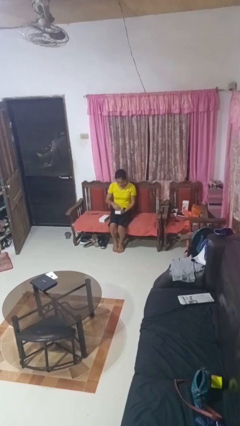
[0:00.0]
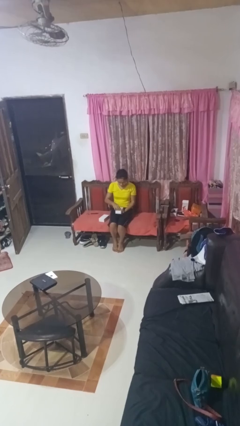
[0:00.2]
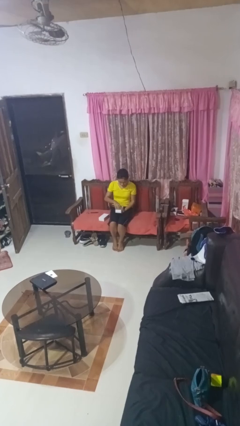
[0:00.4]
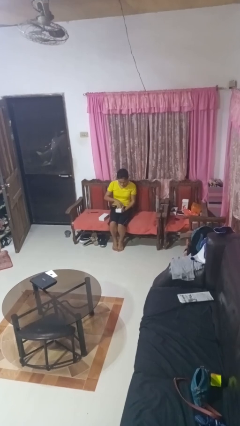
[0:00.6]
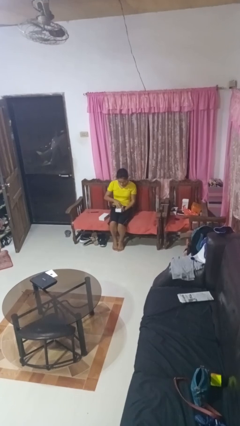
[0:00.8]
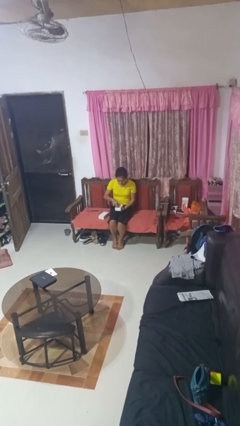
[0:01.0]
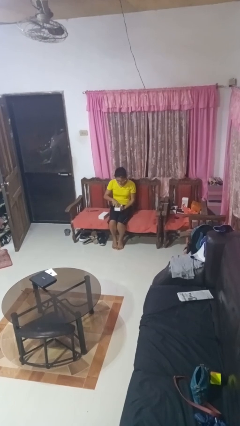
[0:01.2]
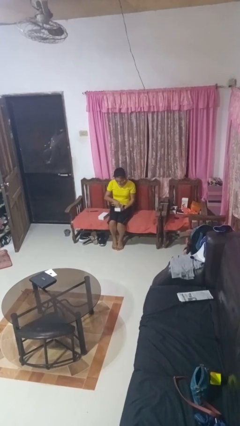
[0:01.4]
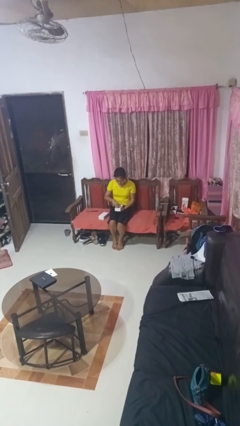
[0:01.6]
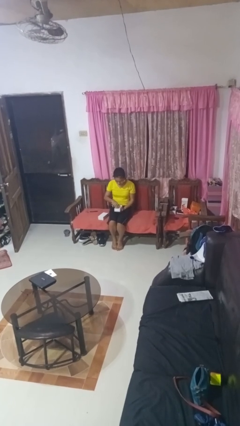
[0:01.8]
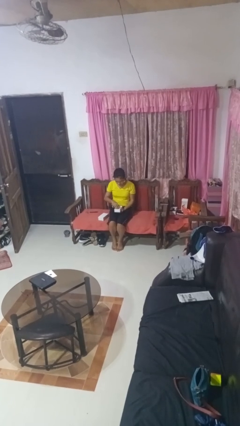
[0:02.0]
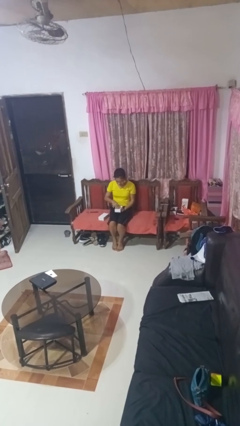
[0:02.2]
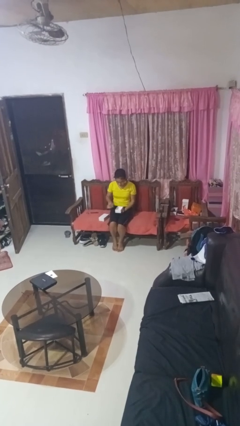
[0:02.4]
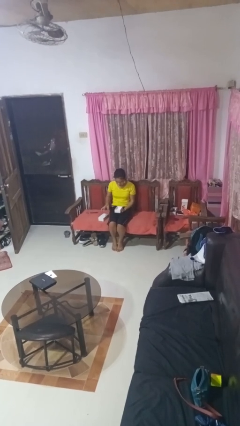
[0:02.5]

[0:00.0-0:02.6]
person searches jewelry box

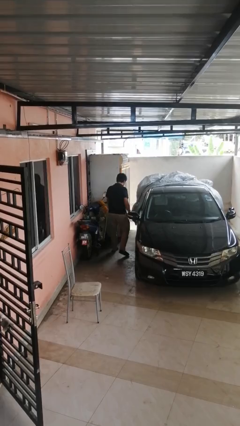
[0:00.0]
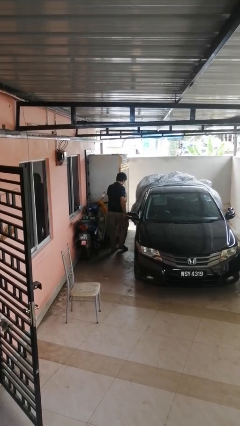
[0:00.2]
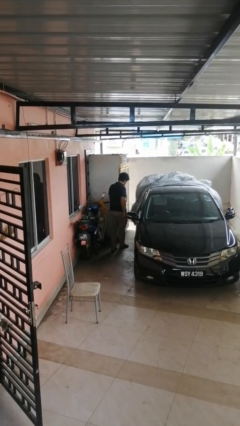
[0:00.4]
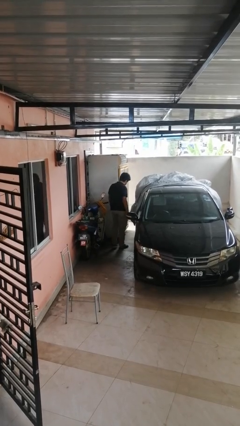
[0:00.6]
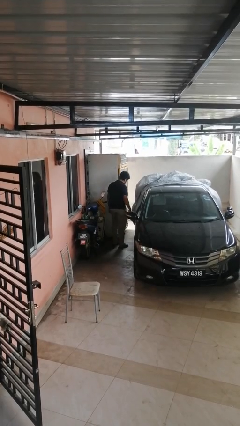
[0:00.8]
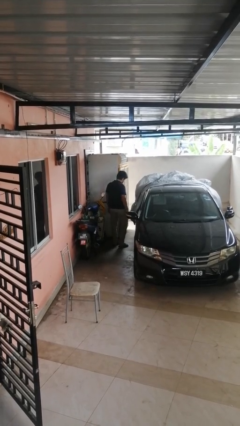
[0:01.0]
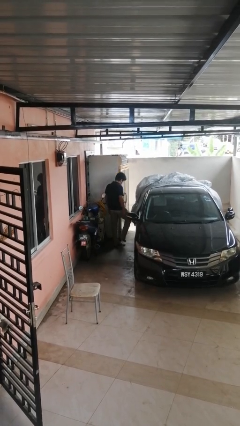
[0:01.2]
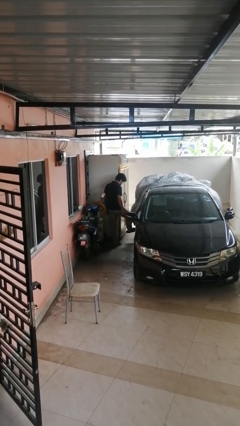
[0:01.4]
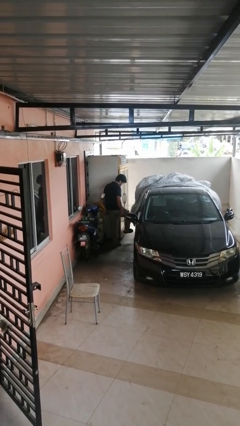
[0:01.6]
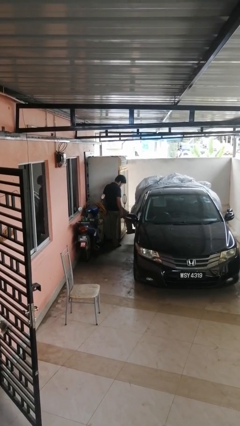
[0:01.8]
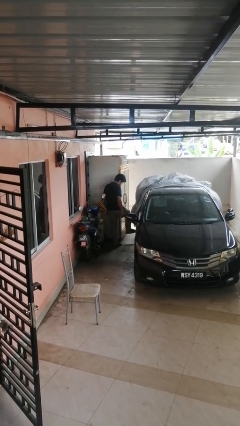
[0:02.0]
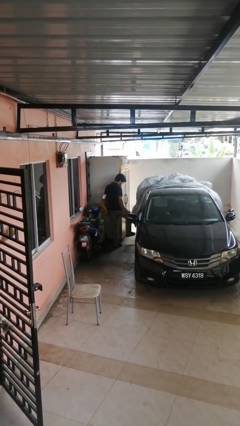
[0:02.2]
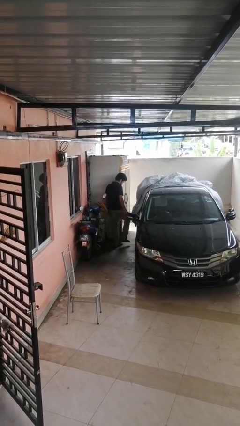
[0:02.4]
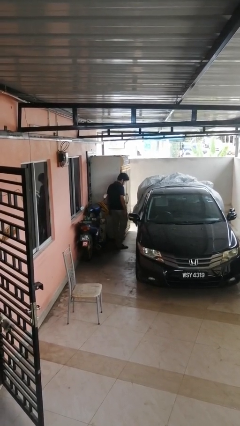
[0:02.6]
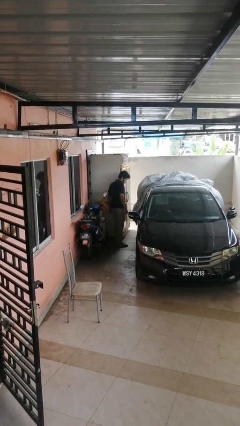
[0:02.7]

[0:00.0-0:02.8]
person kicks car tires

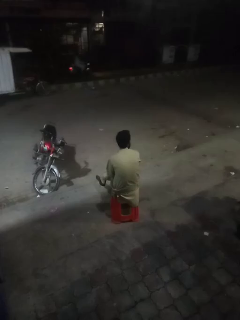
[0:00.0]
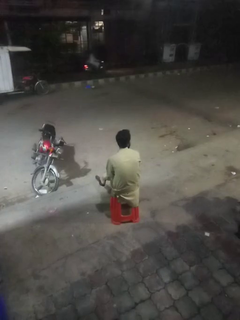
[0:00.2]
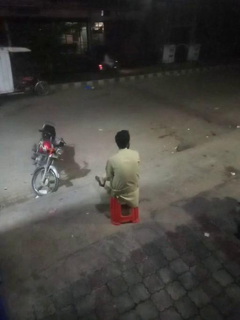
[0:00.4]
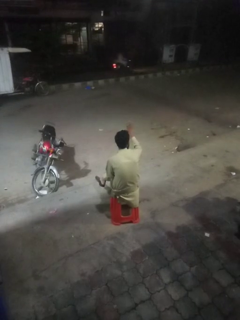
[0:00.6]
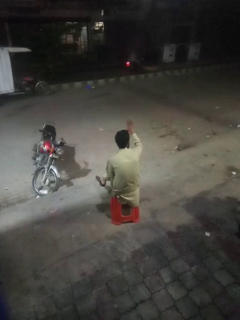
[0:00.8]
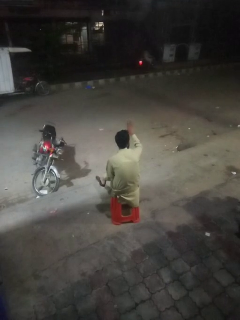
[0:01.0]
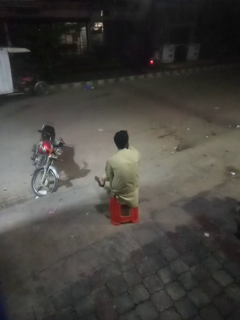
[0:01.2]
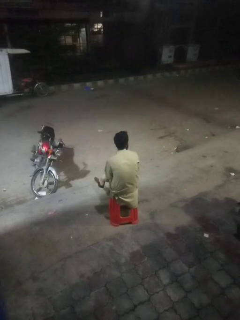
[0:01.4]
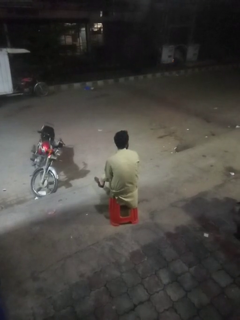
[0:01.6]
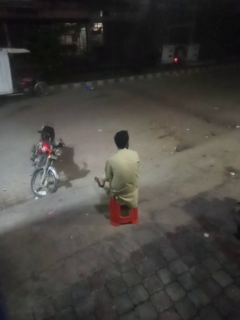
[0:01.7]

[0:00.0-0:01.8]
person gestures number four

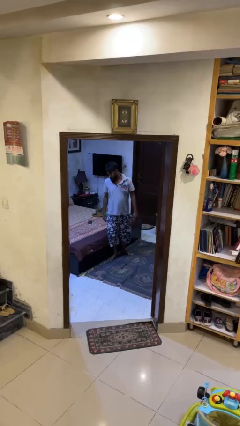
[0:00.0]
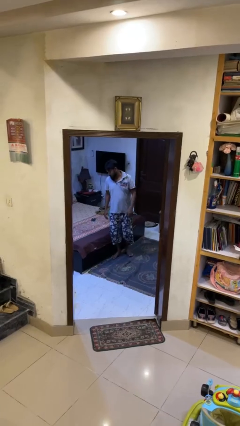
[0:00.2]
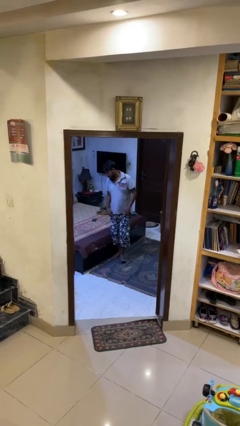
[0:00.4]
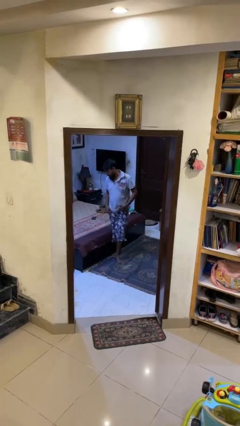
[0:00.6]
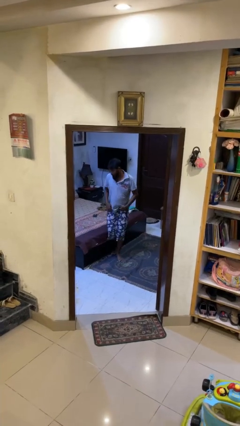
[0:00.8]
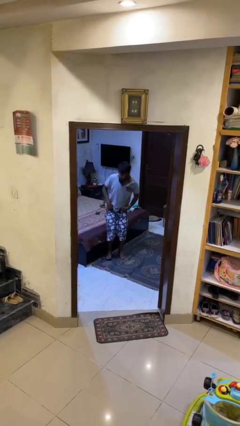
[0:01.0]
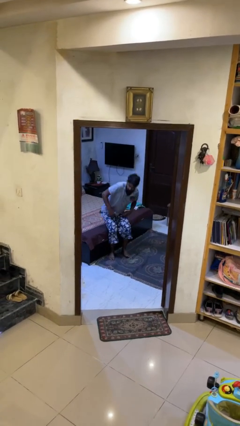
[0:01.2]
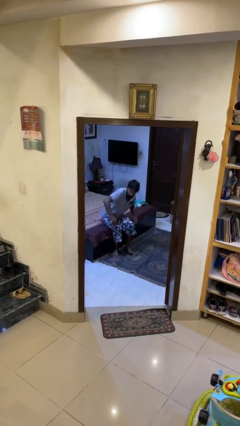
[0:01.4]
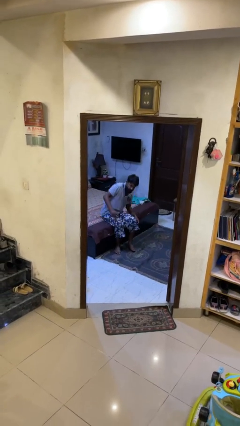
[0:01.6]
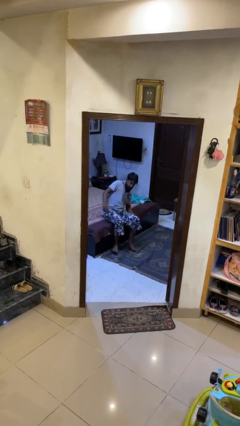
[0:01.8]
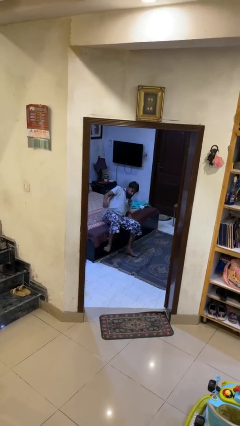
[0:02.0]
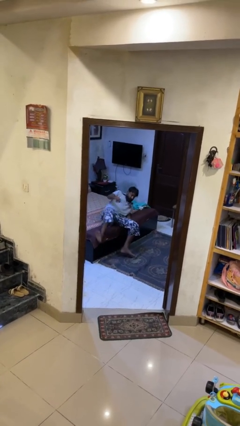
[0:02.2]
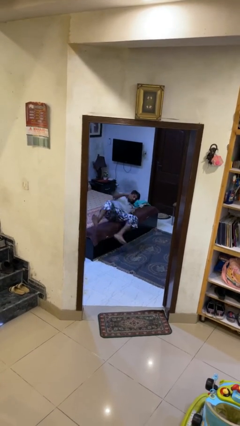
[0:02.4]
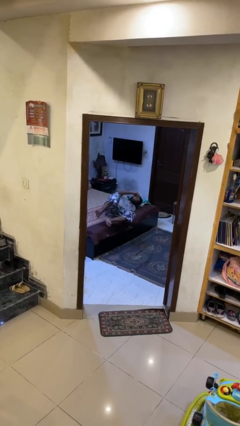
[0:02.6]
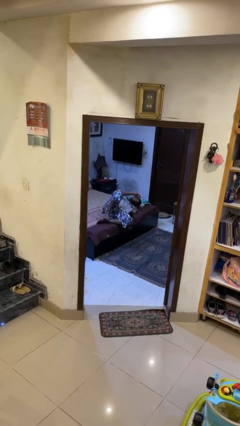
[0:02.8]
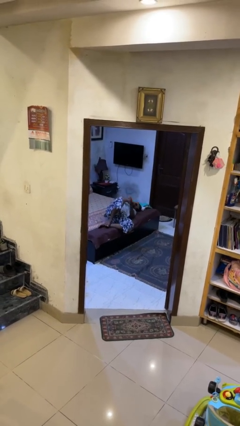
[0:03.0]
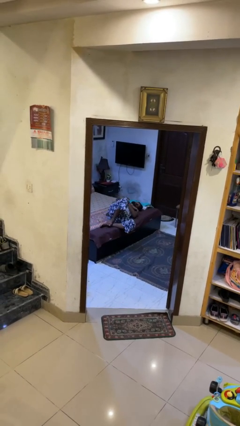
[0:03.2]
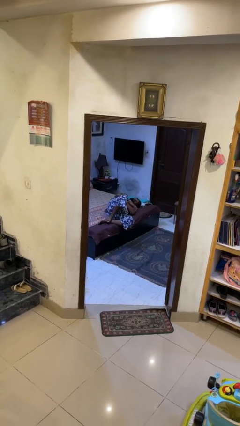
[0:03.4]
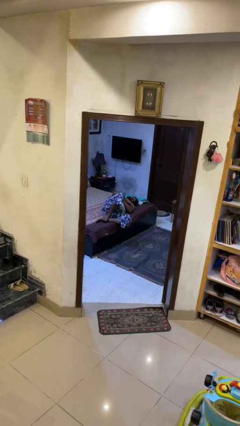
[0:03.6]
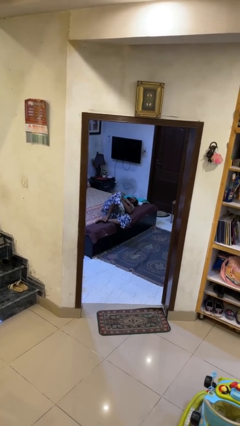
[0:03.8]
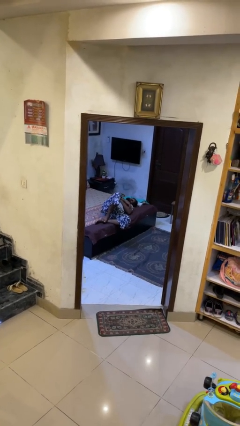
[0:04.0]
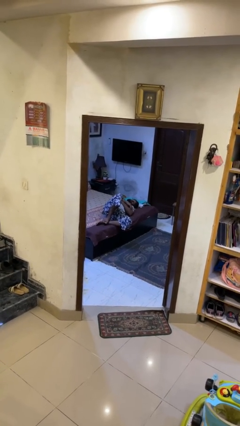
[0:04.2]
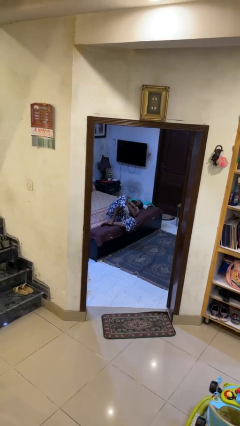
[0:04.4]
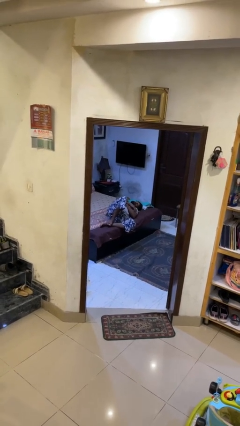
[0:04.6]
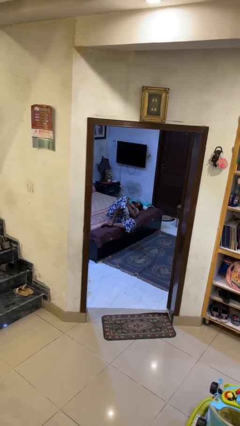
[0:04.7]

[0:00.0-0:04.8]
person lies down on bed

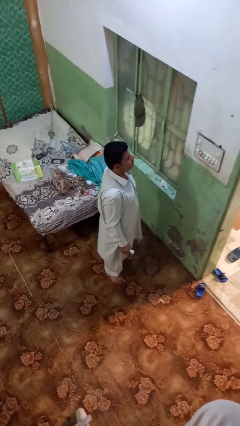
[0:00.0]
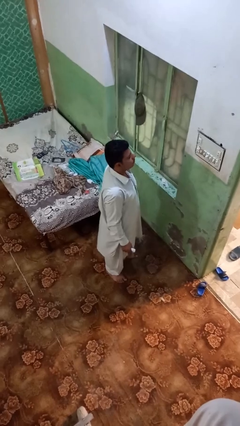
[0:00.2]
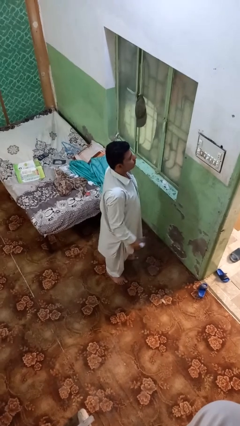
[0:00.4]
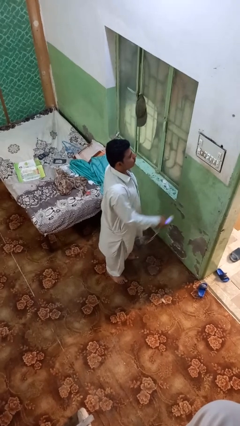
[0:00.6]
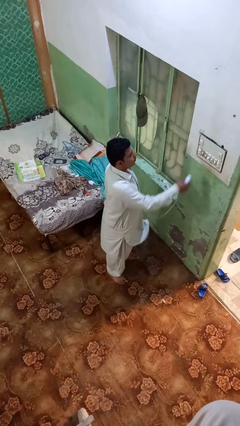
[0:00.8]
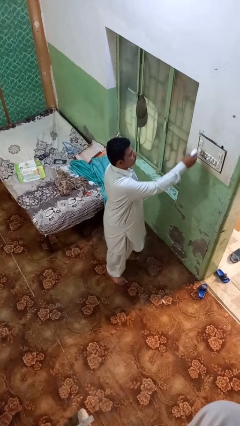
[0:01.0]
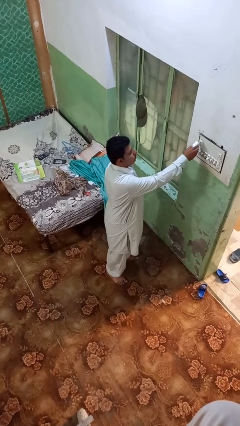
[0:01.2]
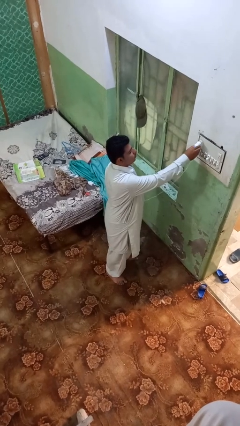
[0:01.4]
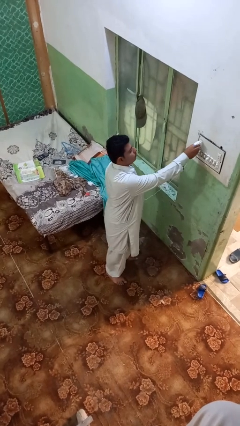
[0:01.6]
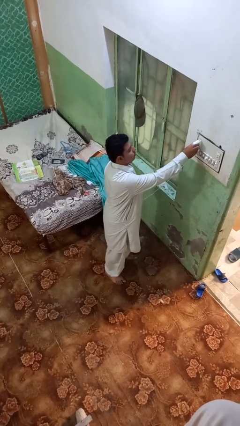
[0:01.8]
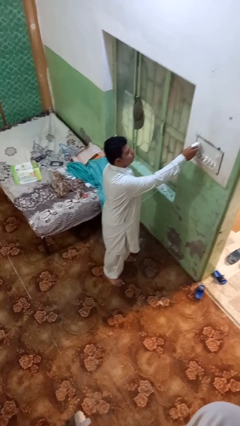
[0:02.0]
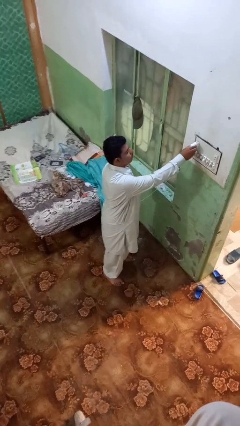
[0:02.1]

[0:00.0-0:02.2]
person plugs into electrical socket

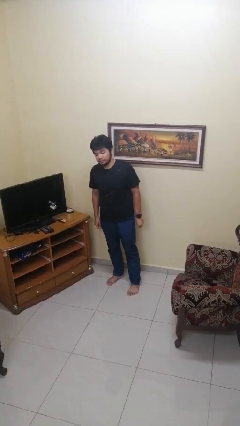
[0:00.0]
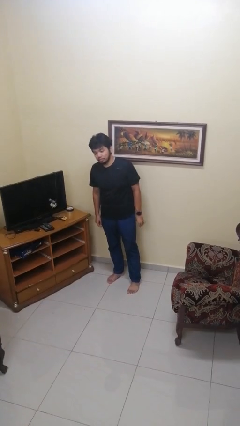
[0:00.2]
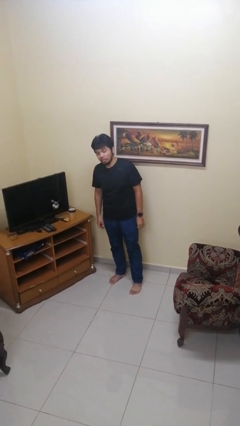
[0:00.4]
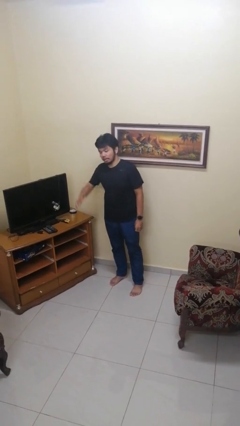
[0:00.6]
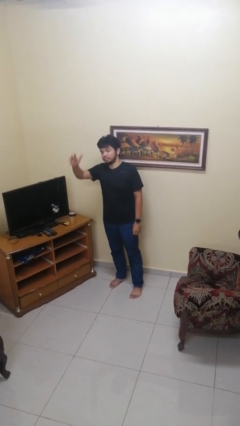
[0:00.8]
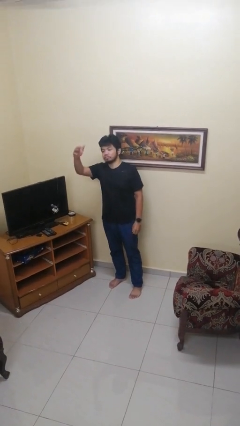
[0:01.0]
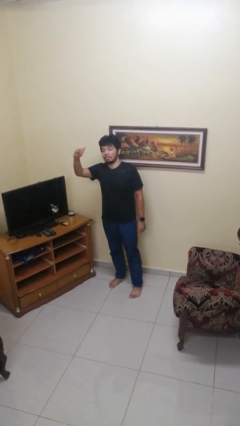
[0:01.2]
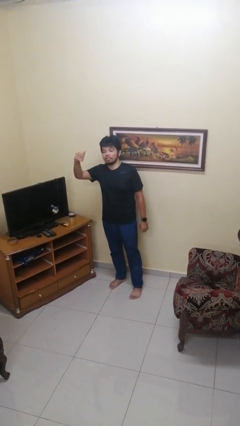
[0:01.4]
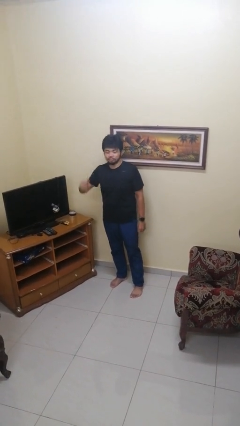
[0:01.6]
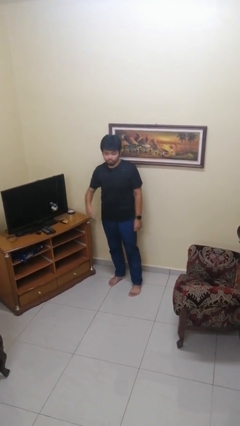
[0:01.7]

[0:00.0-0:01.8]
person gestures come here

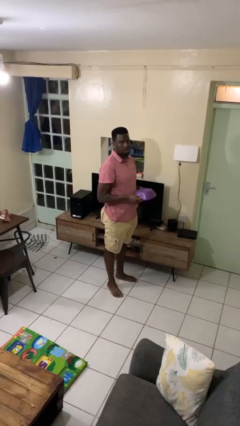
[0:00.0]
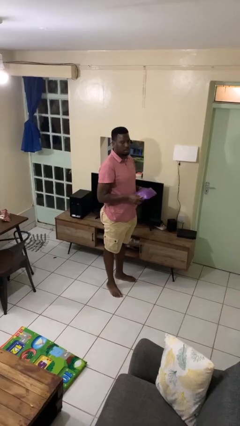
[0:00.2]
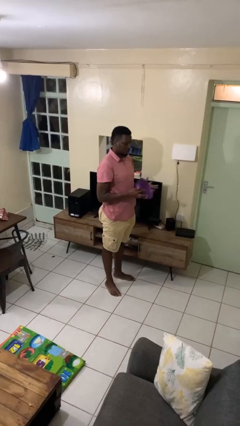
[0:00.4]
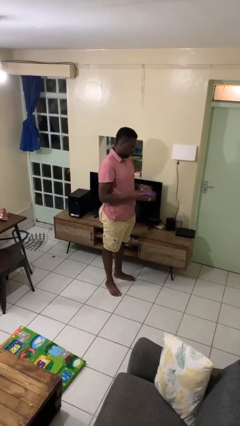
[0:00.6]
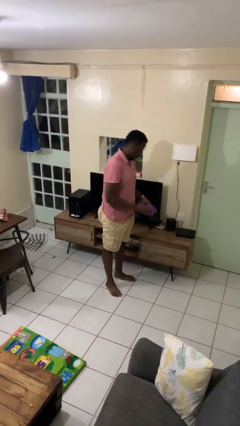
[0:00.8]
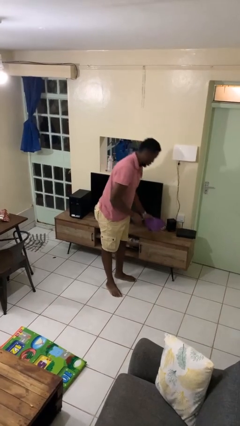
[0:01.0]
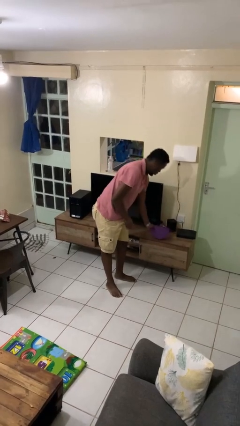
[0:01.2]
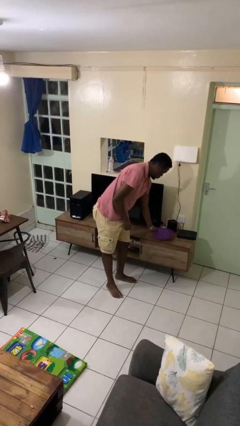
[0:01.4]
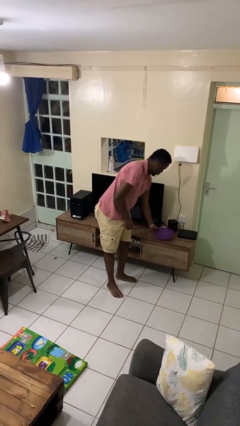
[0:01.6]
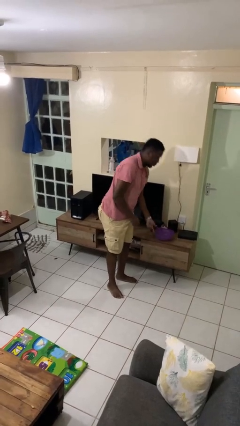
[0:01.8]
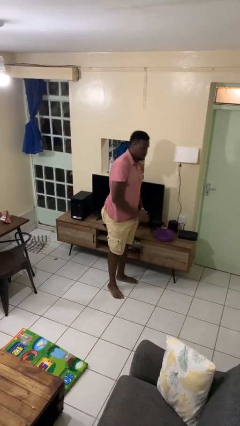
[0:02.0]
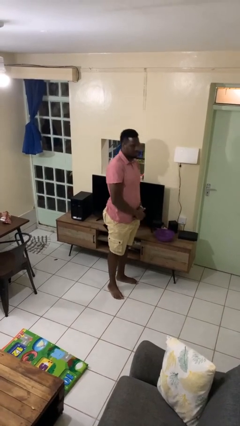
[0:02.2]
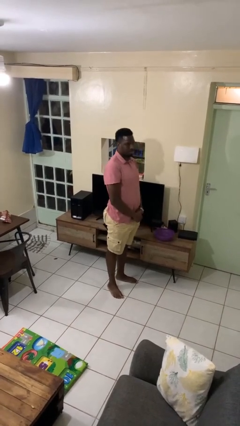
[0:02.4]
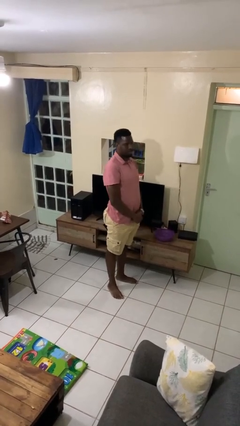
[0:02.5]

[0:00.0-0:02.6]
person puts down object on countertop
